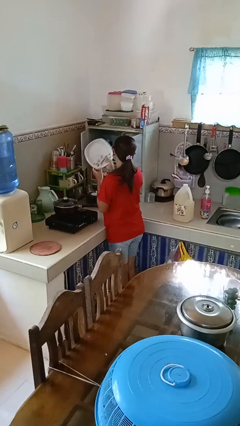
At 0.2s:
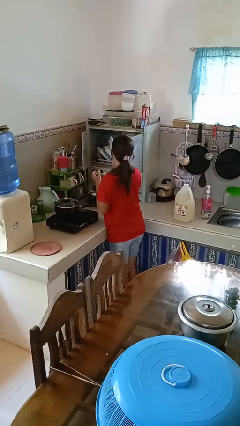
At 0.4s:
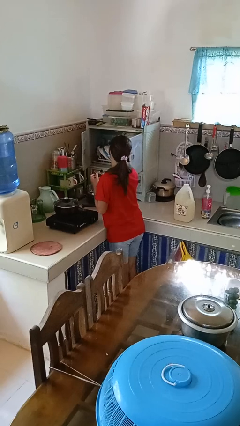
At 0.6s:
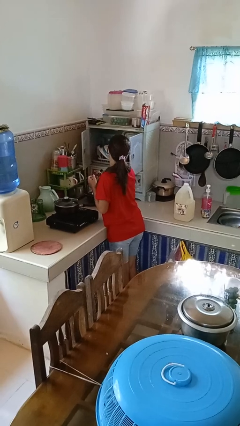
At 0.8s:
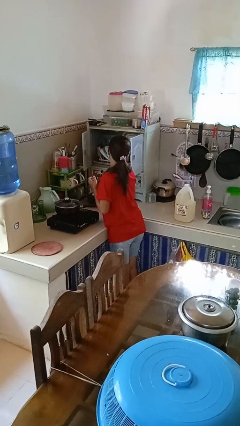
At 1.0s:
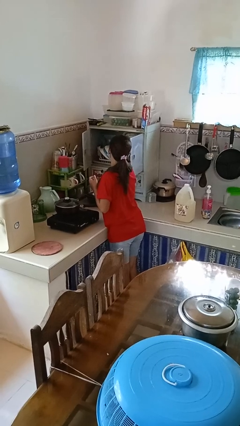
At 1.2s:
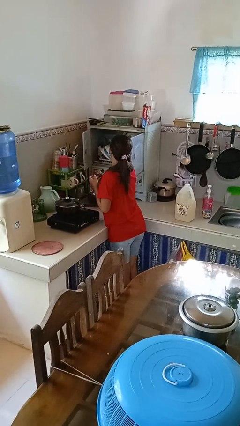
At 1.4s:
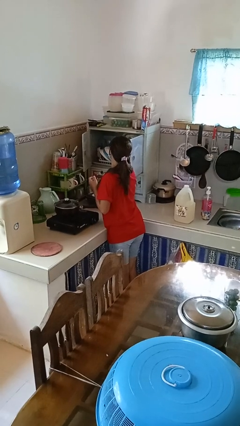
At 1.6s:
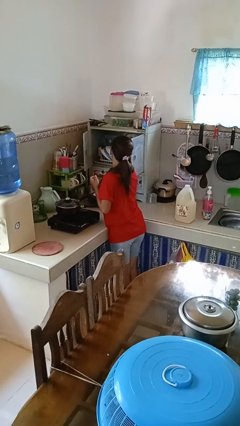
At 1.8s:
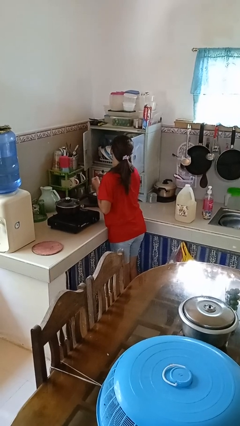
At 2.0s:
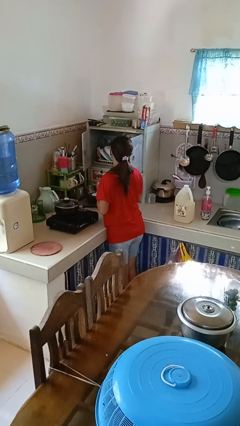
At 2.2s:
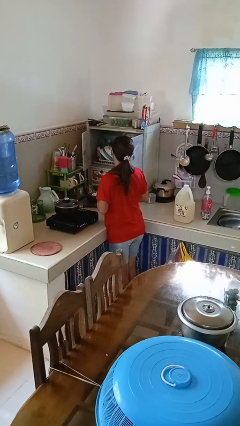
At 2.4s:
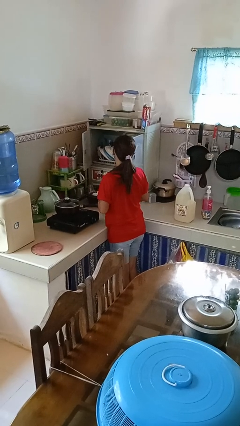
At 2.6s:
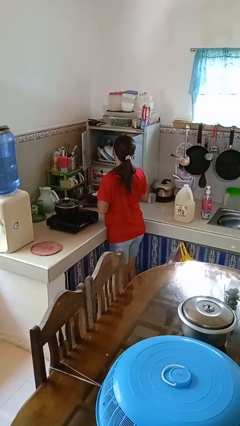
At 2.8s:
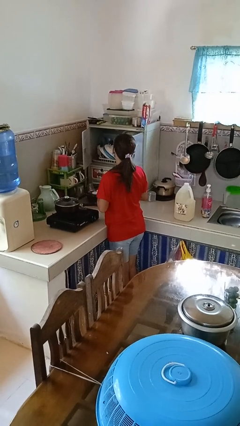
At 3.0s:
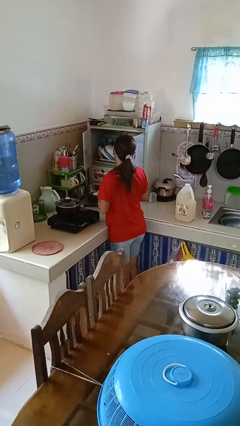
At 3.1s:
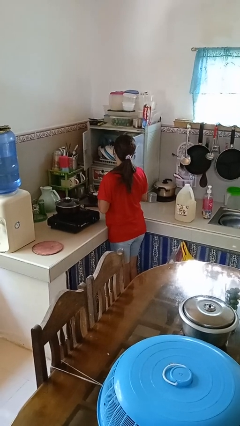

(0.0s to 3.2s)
person puts object in cabinet

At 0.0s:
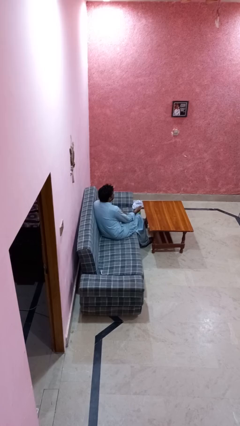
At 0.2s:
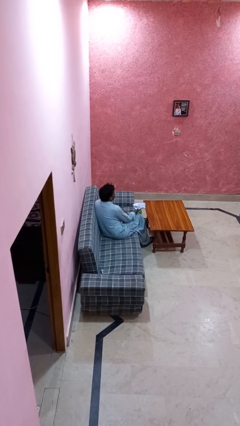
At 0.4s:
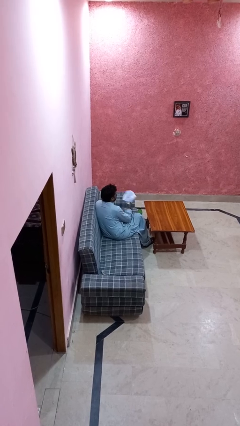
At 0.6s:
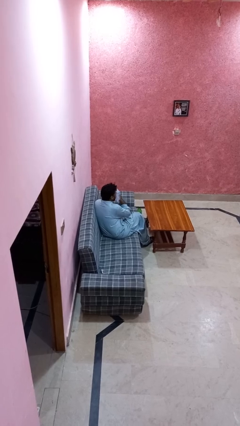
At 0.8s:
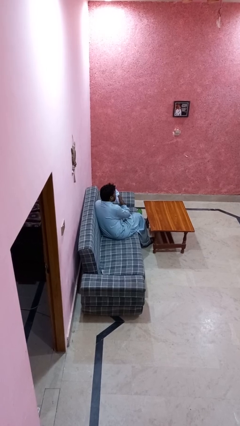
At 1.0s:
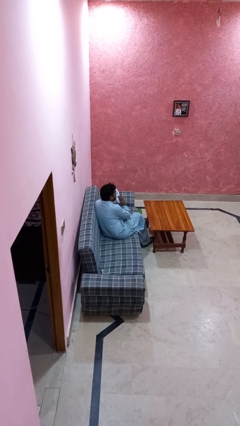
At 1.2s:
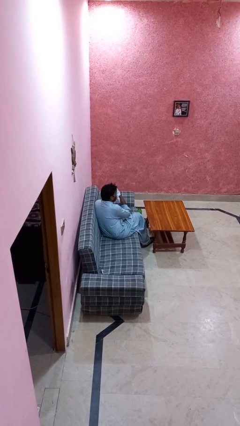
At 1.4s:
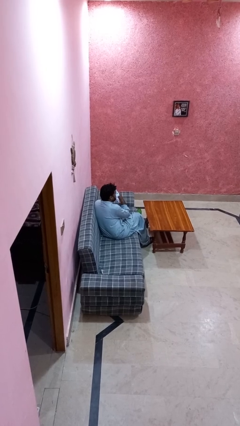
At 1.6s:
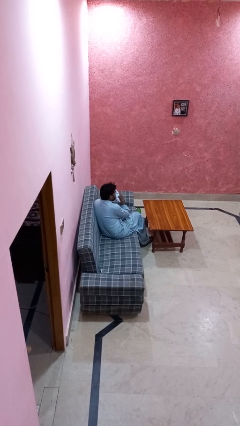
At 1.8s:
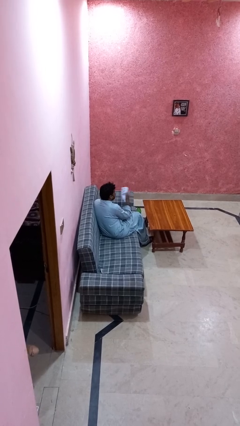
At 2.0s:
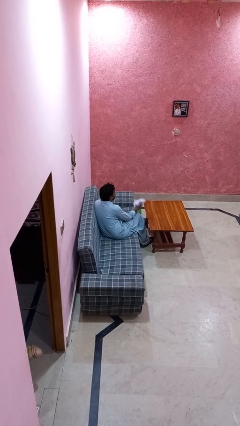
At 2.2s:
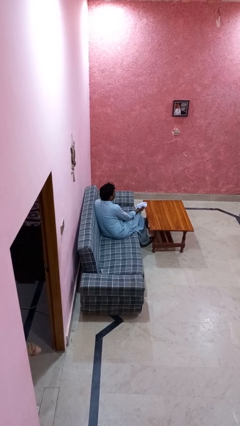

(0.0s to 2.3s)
person blows nose

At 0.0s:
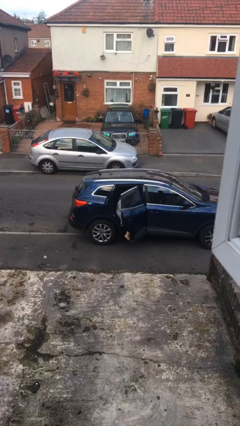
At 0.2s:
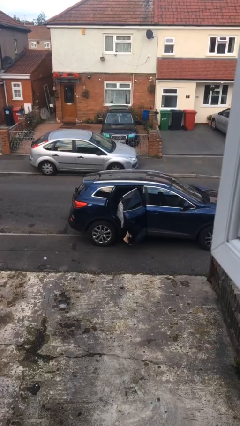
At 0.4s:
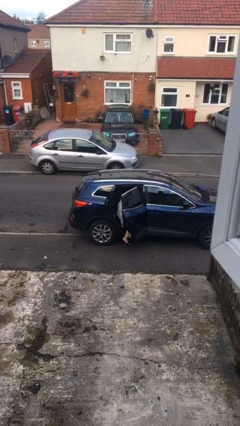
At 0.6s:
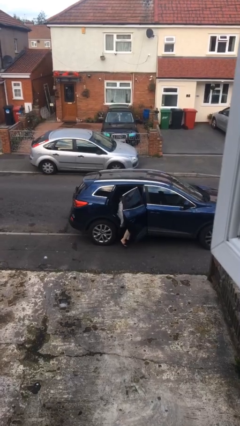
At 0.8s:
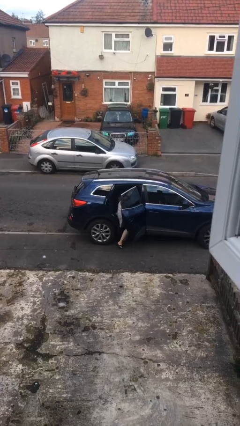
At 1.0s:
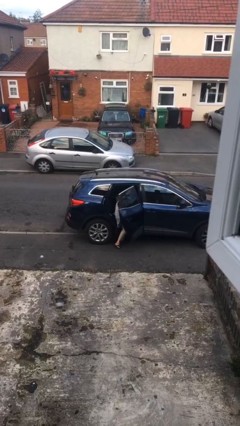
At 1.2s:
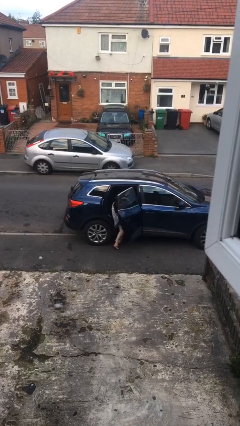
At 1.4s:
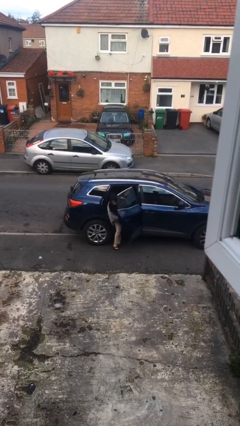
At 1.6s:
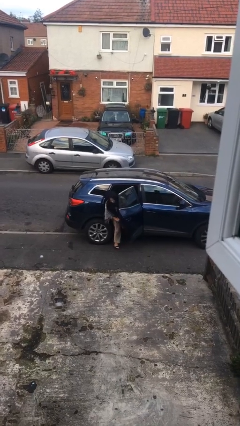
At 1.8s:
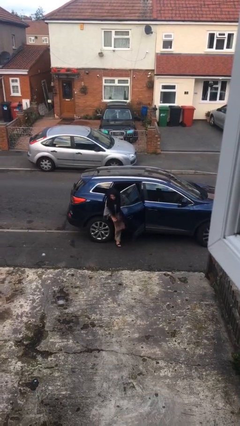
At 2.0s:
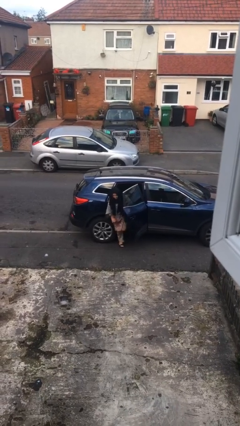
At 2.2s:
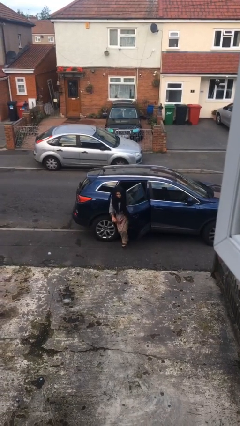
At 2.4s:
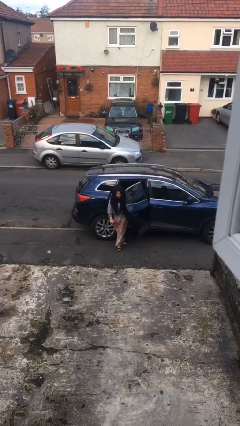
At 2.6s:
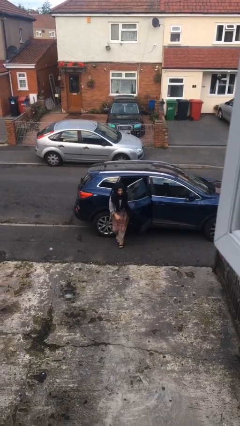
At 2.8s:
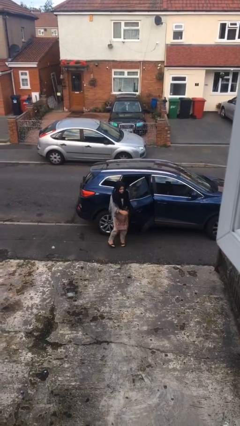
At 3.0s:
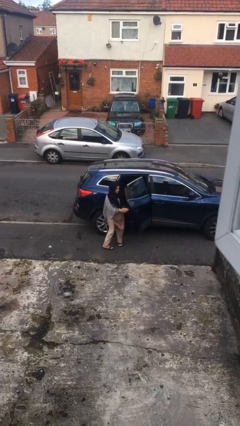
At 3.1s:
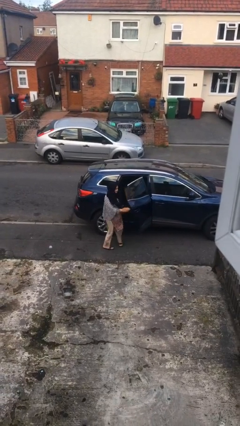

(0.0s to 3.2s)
person exits car

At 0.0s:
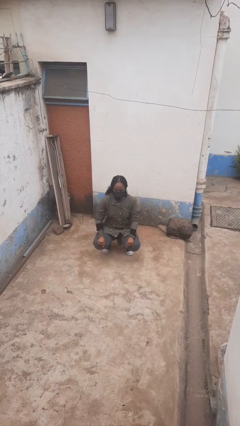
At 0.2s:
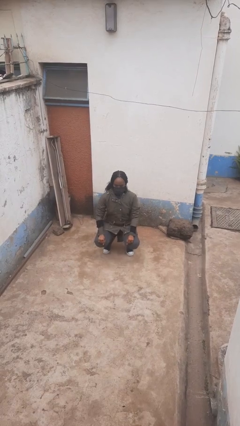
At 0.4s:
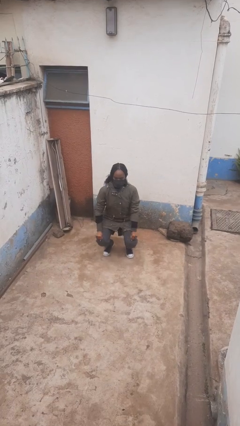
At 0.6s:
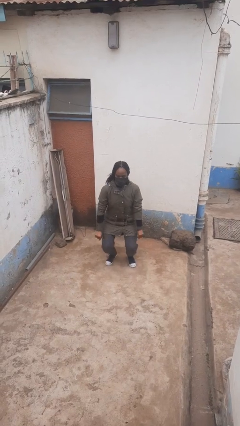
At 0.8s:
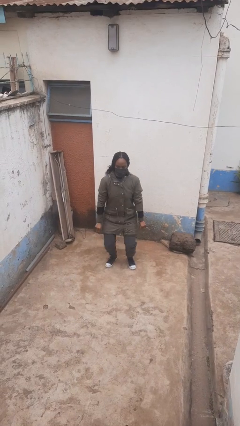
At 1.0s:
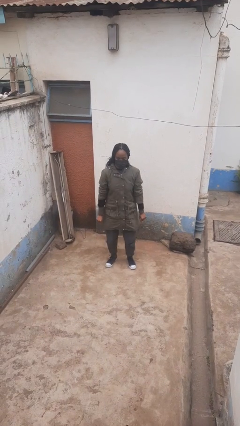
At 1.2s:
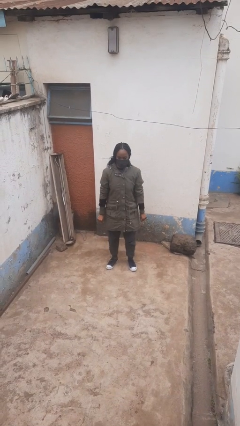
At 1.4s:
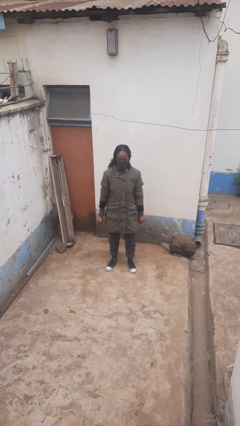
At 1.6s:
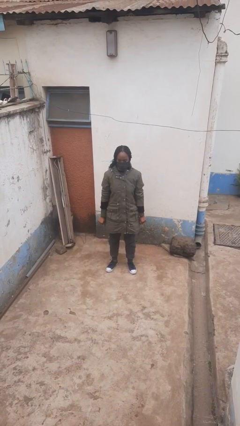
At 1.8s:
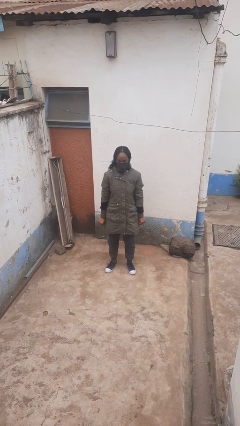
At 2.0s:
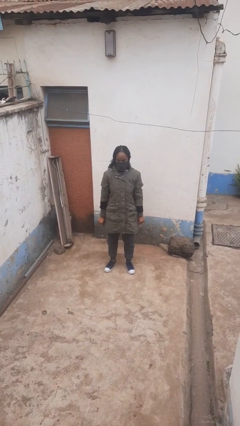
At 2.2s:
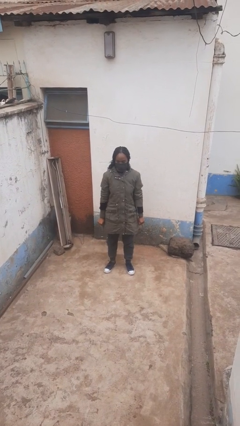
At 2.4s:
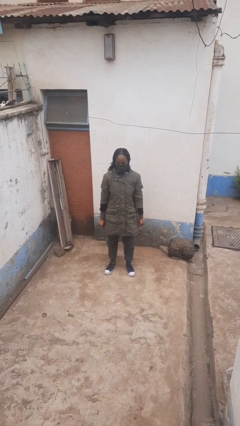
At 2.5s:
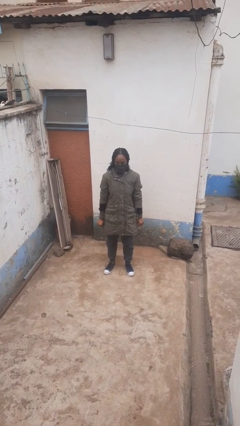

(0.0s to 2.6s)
person stands up

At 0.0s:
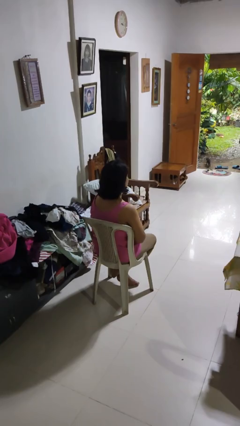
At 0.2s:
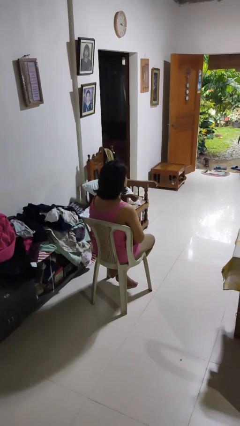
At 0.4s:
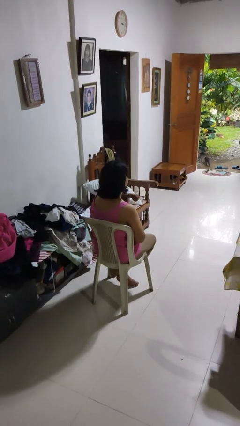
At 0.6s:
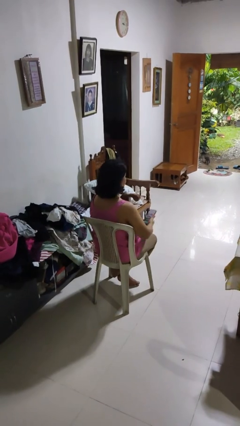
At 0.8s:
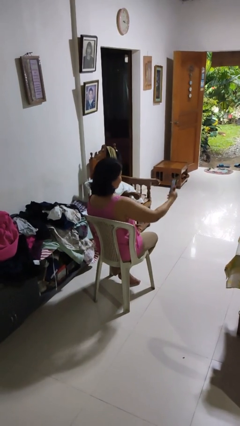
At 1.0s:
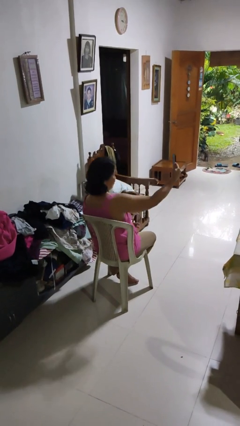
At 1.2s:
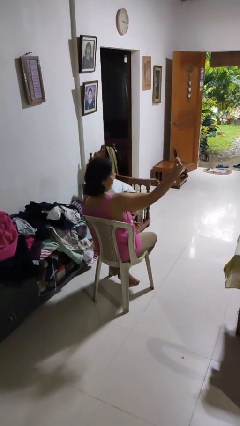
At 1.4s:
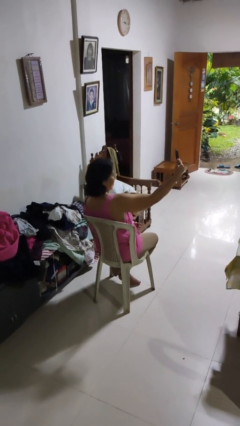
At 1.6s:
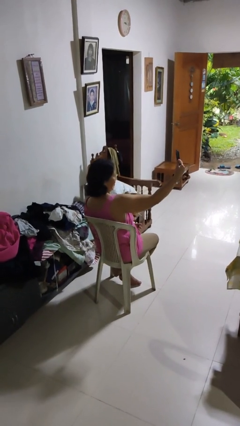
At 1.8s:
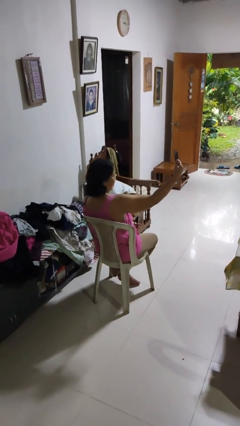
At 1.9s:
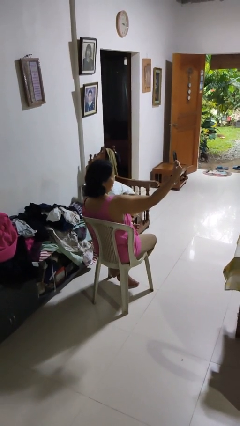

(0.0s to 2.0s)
person takes selfie

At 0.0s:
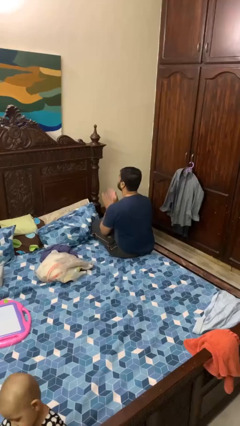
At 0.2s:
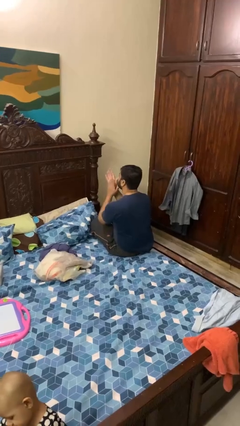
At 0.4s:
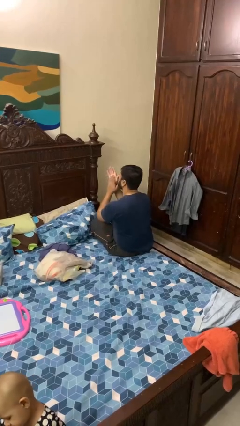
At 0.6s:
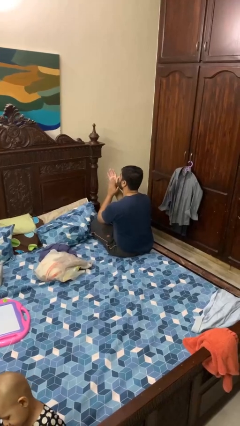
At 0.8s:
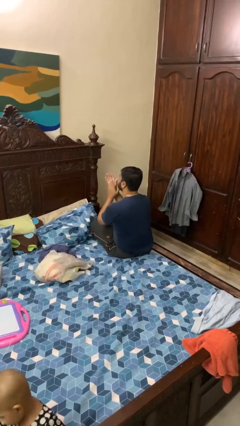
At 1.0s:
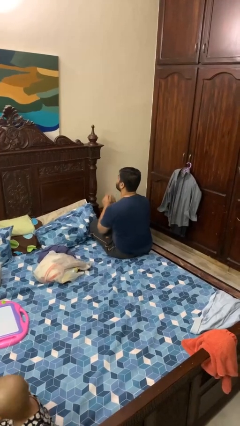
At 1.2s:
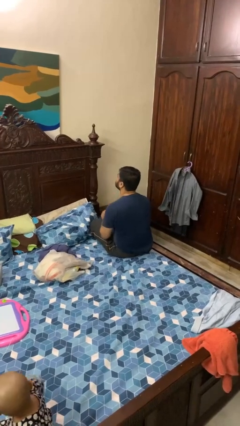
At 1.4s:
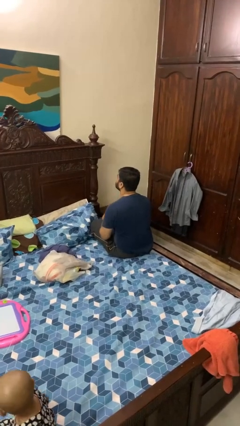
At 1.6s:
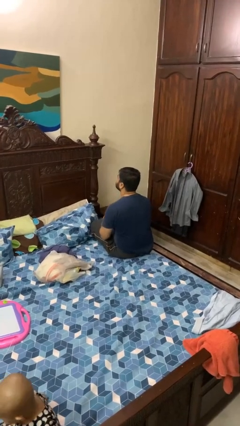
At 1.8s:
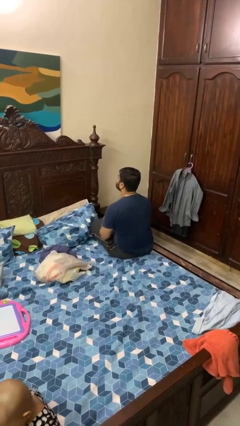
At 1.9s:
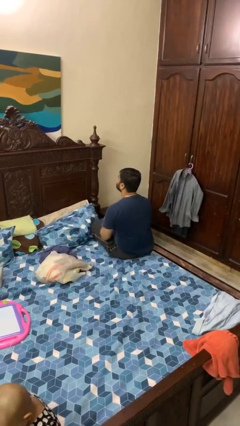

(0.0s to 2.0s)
person claps hands

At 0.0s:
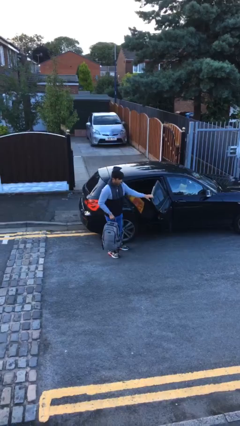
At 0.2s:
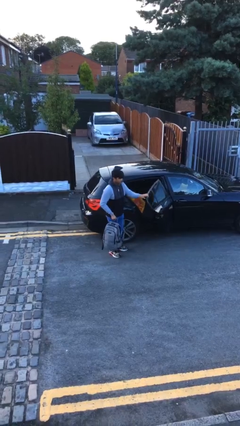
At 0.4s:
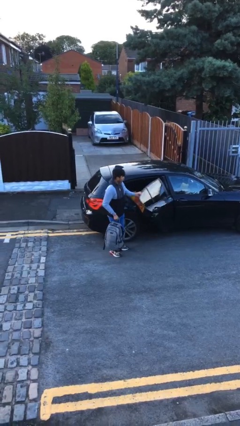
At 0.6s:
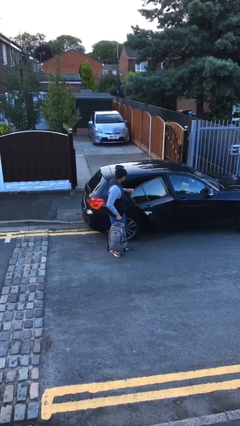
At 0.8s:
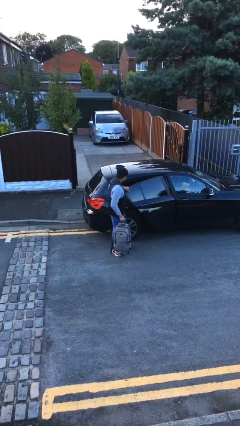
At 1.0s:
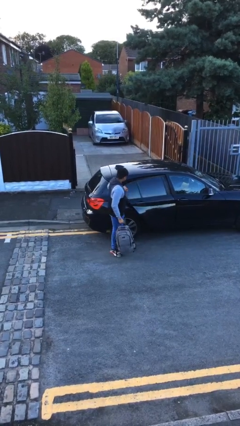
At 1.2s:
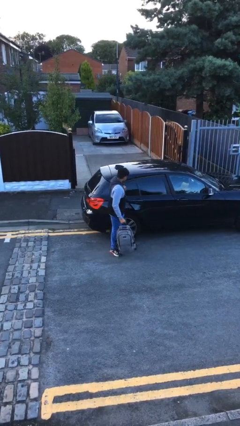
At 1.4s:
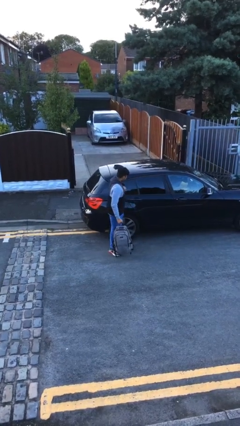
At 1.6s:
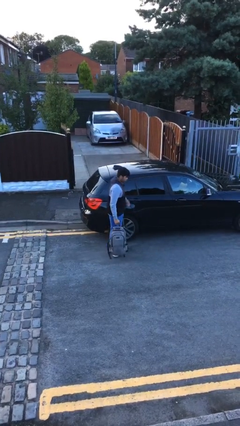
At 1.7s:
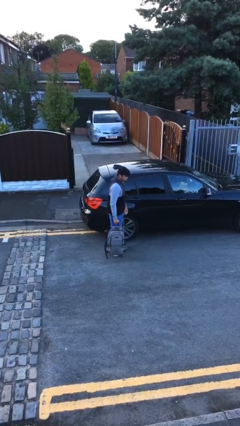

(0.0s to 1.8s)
person closes car door

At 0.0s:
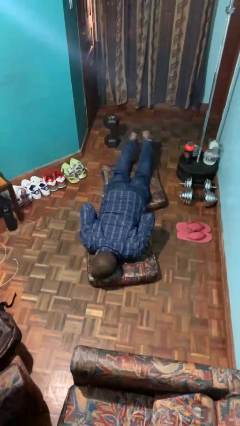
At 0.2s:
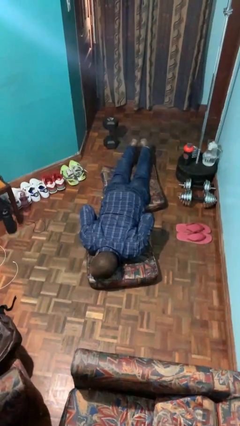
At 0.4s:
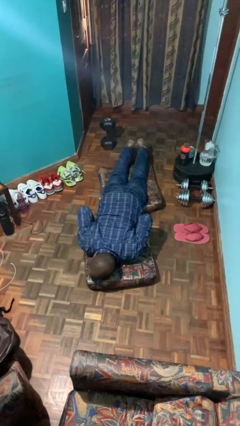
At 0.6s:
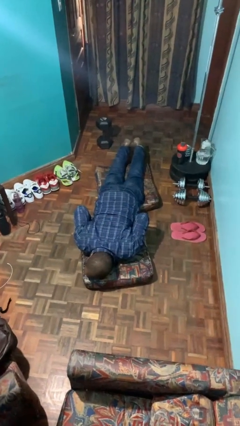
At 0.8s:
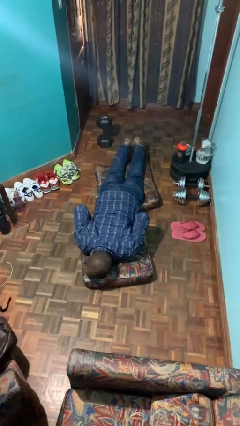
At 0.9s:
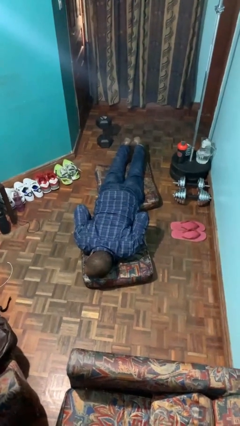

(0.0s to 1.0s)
person lies down on floor
